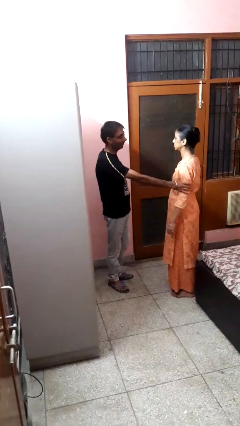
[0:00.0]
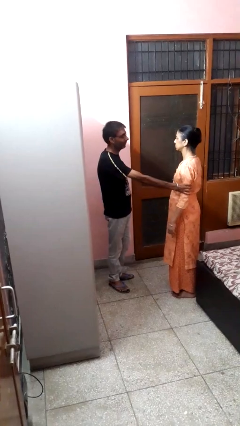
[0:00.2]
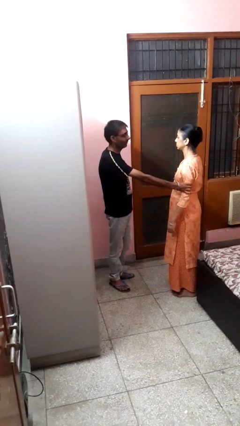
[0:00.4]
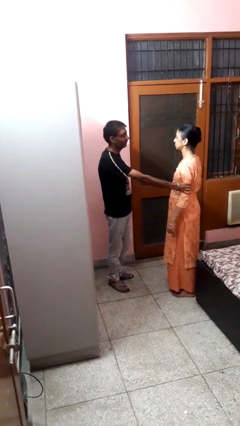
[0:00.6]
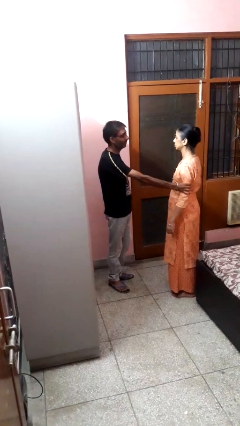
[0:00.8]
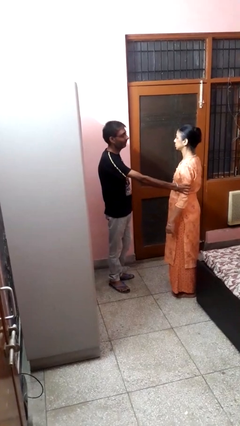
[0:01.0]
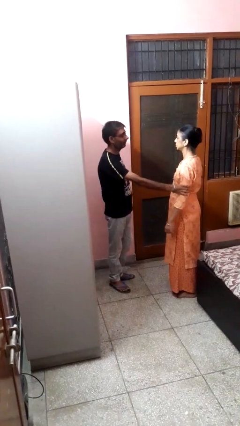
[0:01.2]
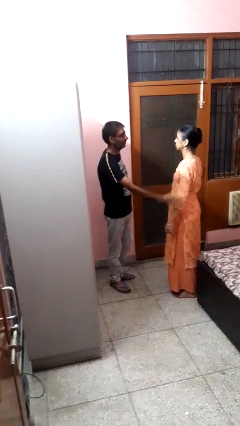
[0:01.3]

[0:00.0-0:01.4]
person grabs person by bicep

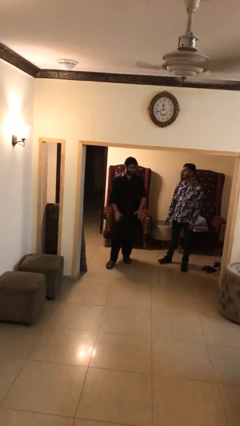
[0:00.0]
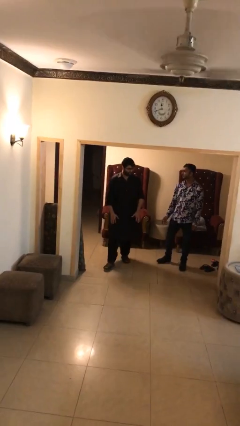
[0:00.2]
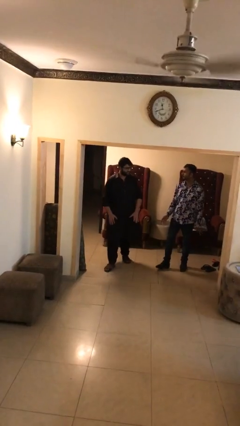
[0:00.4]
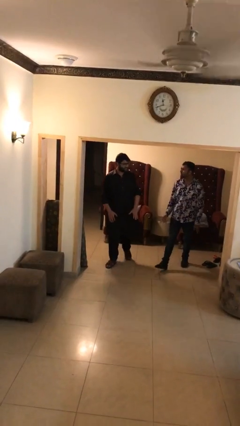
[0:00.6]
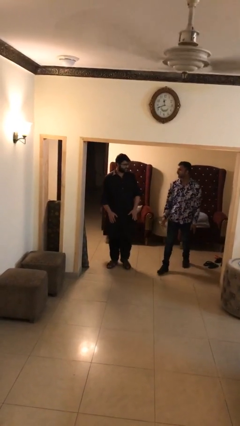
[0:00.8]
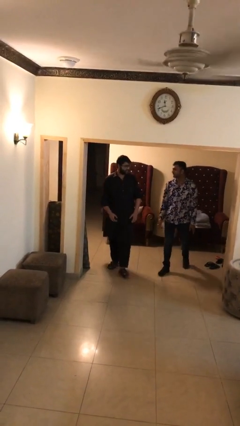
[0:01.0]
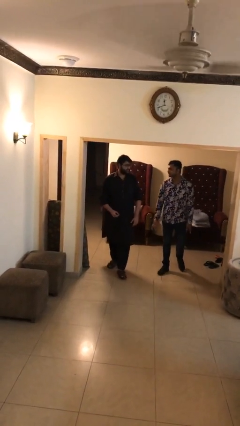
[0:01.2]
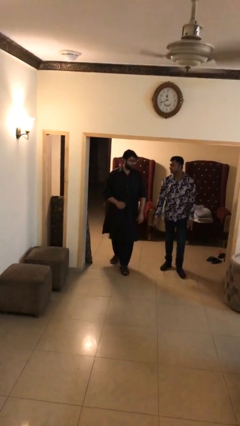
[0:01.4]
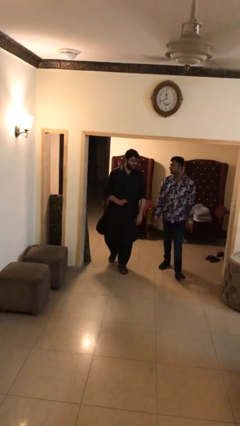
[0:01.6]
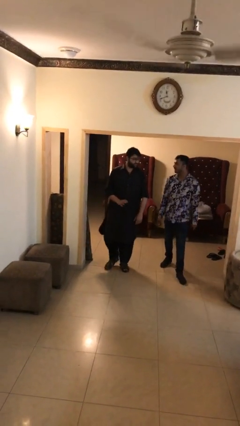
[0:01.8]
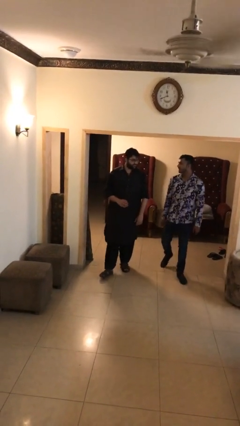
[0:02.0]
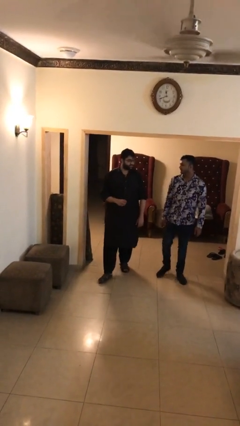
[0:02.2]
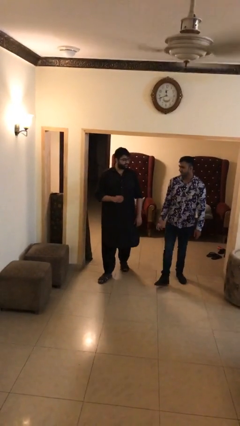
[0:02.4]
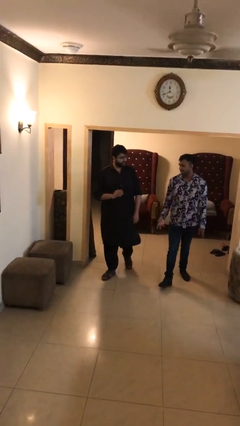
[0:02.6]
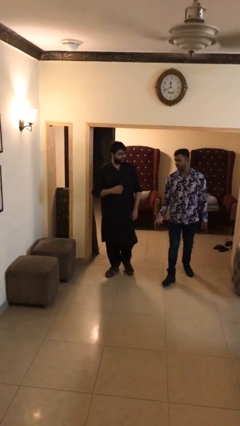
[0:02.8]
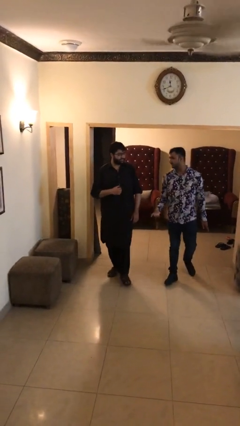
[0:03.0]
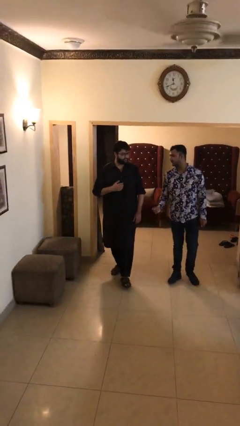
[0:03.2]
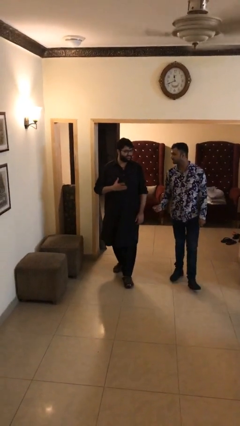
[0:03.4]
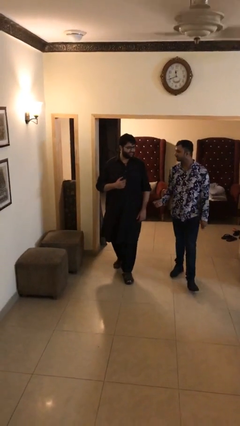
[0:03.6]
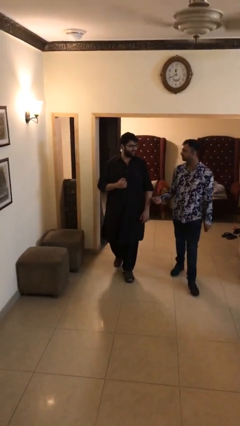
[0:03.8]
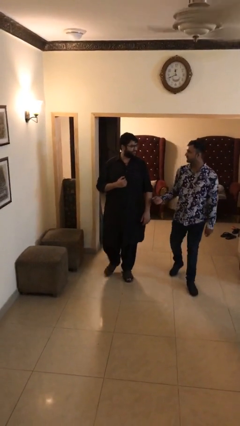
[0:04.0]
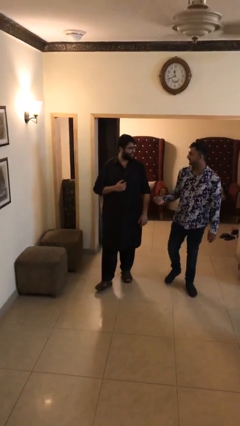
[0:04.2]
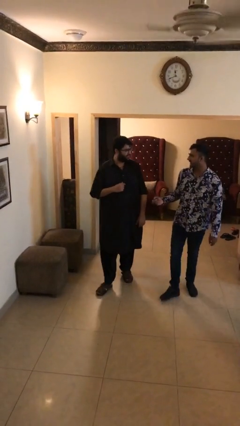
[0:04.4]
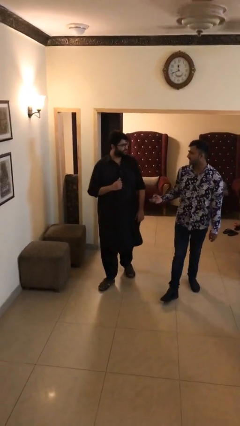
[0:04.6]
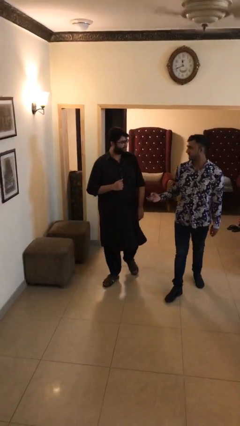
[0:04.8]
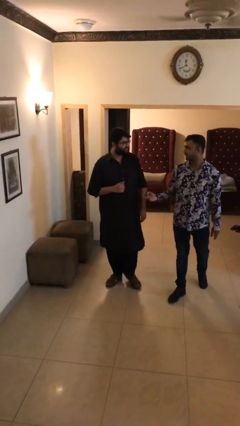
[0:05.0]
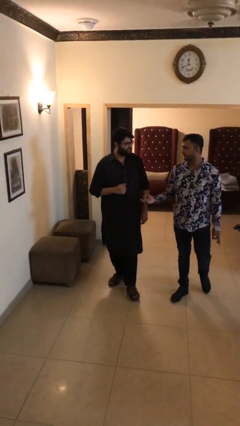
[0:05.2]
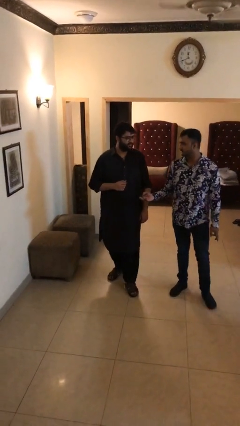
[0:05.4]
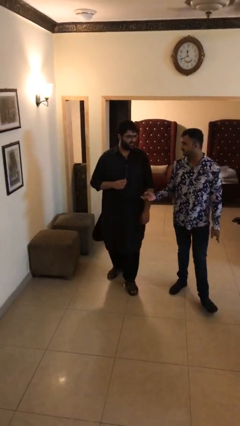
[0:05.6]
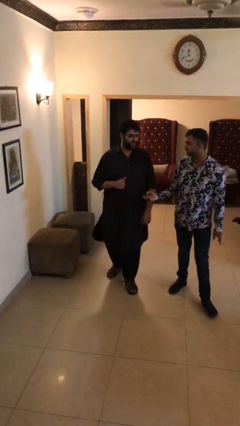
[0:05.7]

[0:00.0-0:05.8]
person talks to person

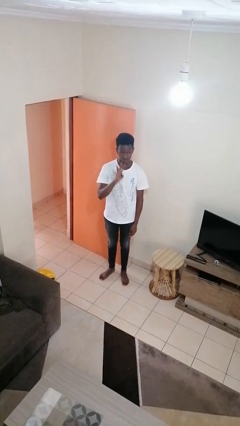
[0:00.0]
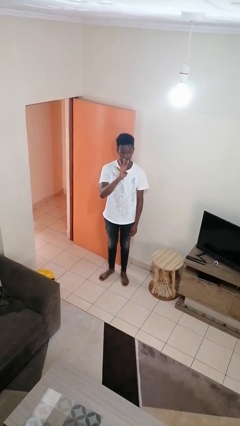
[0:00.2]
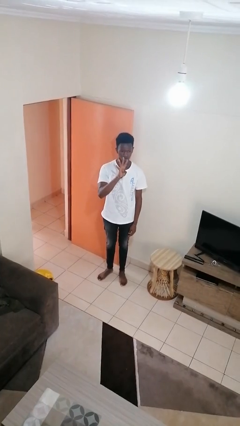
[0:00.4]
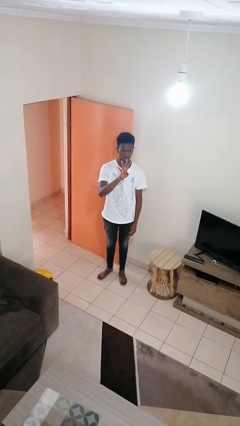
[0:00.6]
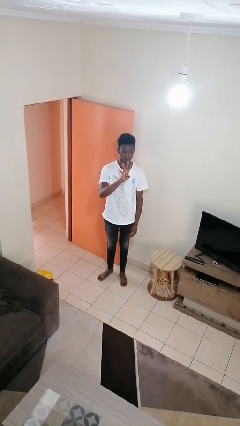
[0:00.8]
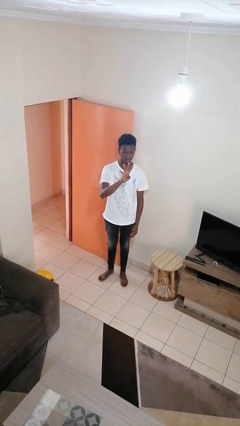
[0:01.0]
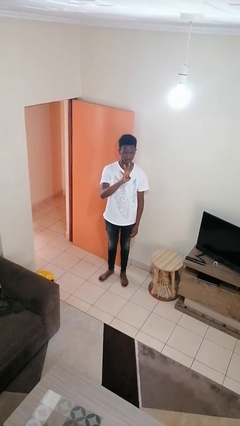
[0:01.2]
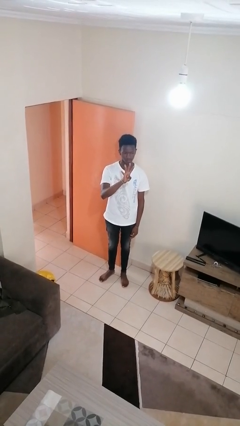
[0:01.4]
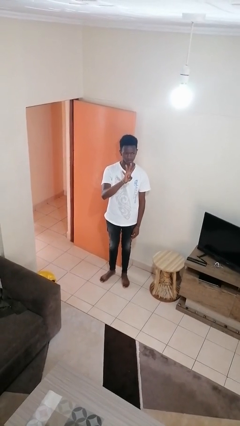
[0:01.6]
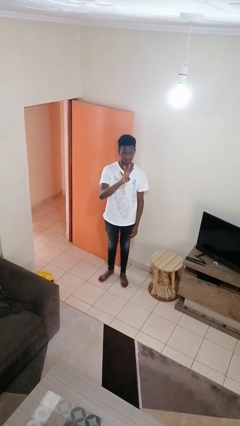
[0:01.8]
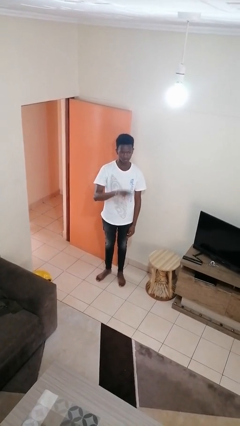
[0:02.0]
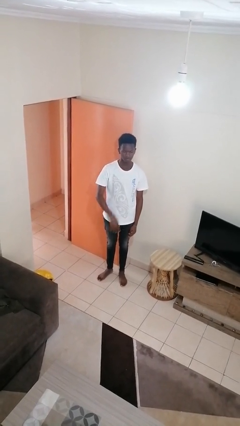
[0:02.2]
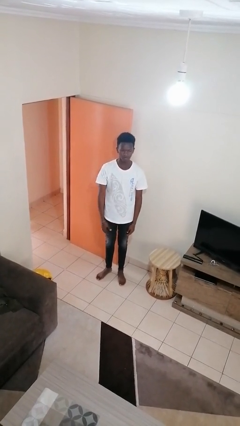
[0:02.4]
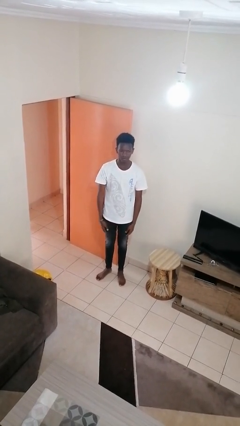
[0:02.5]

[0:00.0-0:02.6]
person gestures number four

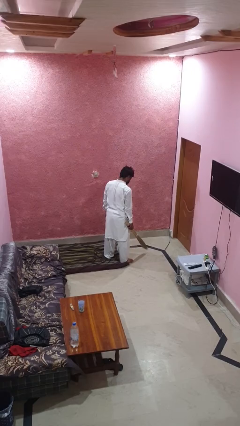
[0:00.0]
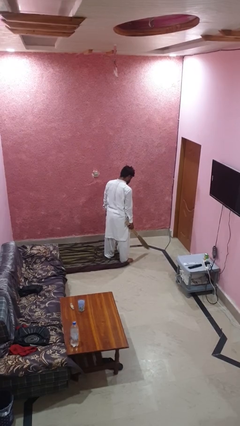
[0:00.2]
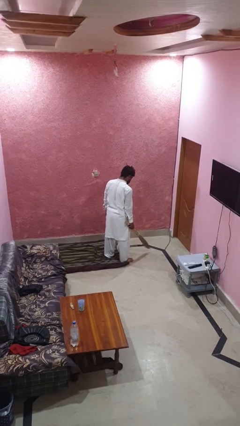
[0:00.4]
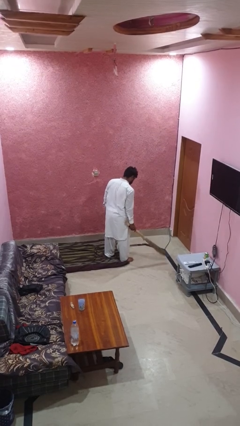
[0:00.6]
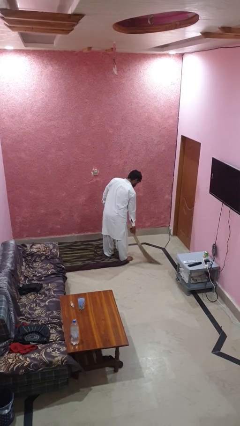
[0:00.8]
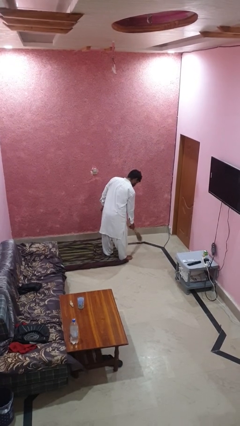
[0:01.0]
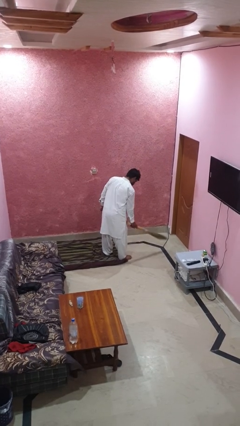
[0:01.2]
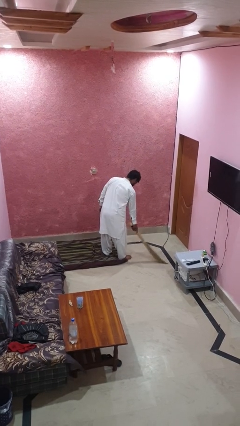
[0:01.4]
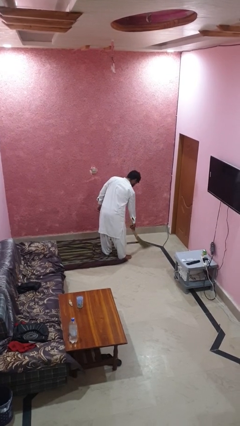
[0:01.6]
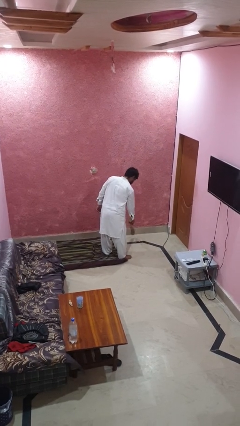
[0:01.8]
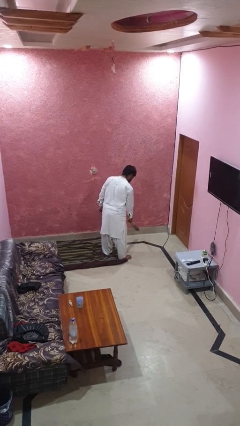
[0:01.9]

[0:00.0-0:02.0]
person sweeps floor

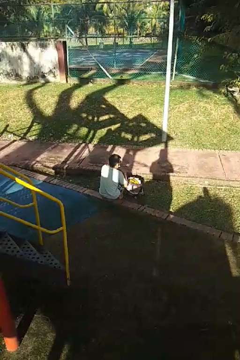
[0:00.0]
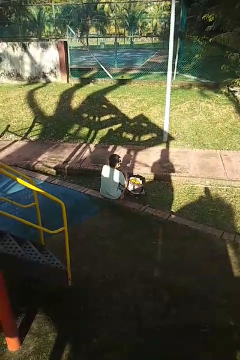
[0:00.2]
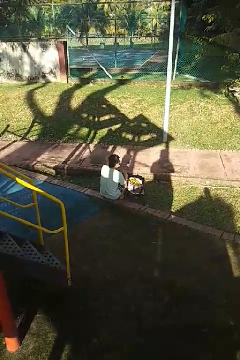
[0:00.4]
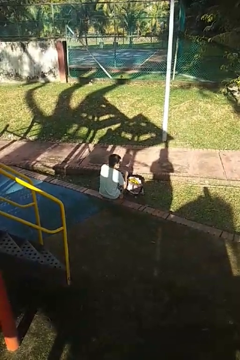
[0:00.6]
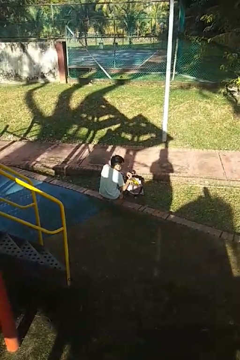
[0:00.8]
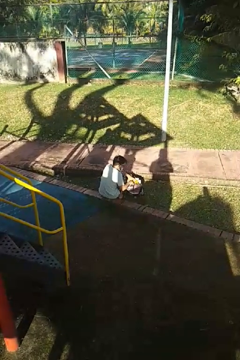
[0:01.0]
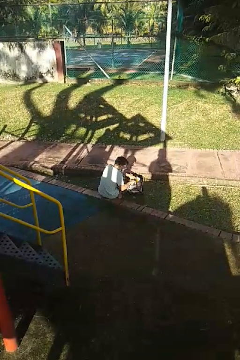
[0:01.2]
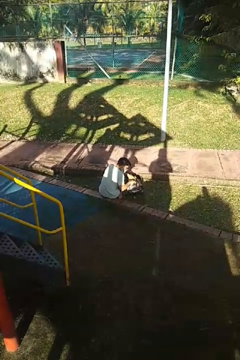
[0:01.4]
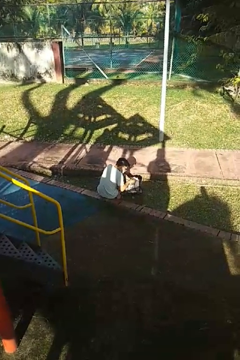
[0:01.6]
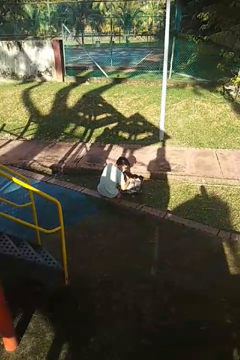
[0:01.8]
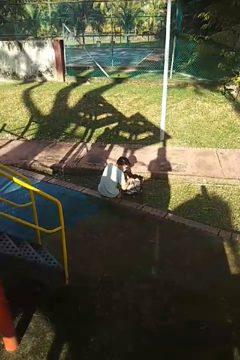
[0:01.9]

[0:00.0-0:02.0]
person searches in bag

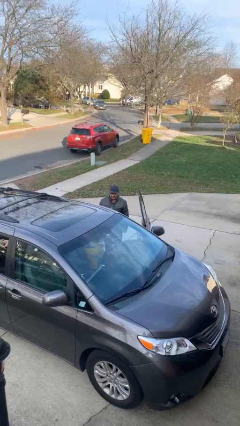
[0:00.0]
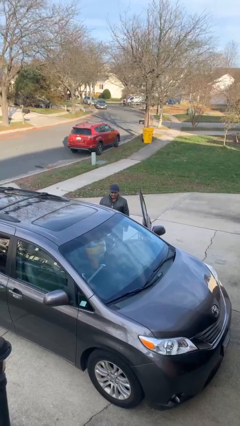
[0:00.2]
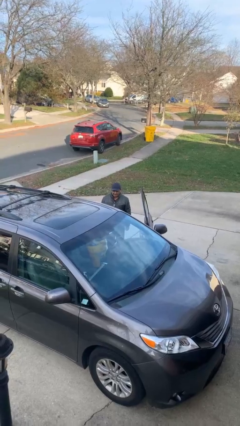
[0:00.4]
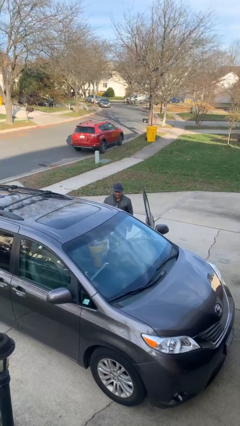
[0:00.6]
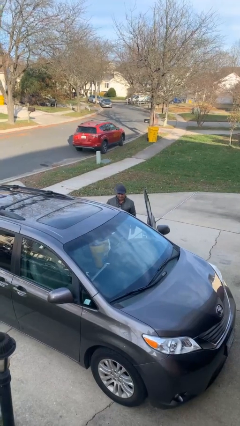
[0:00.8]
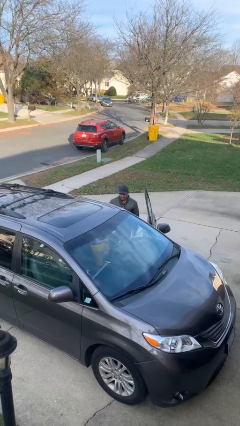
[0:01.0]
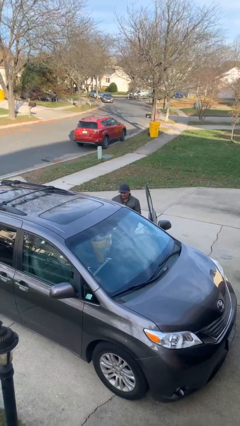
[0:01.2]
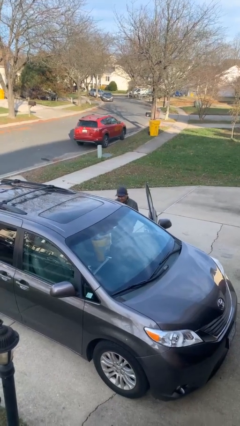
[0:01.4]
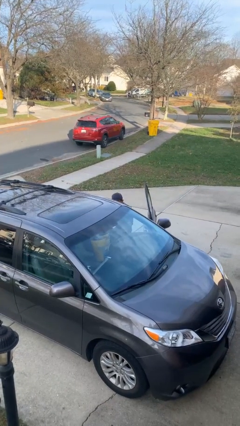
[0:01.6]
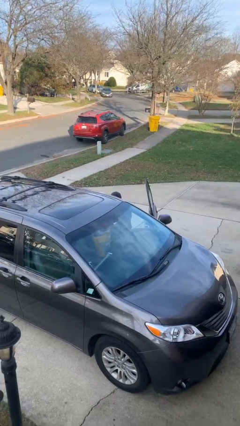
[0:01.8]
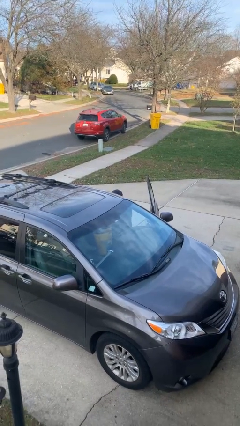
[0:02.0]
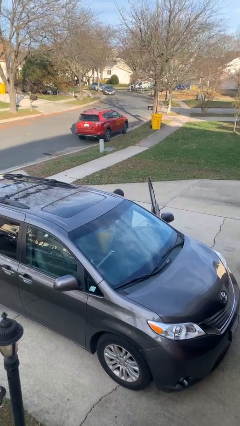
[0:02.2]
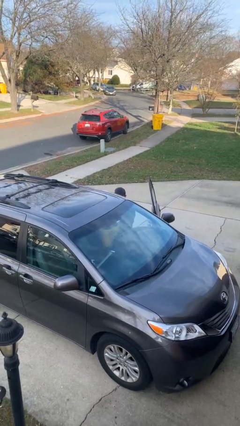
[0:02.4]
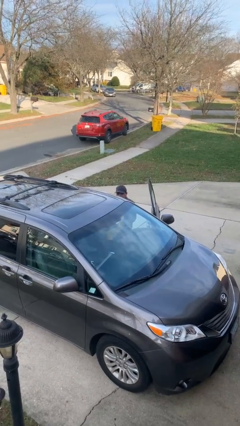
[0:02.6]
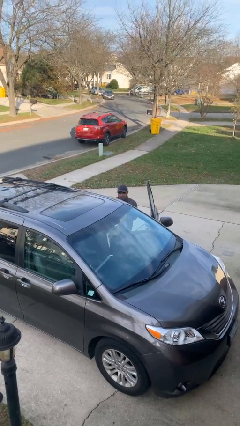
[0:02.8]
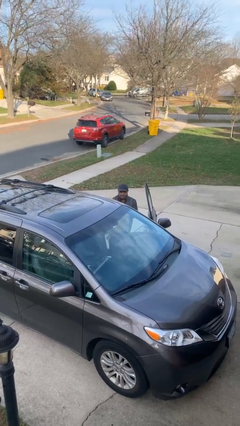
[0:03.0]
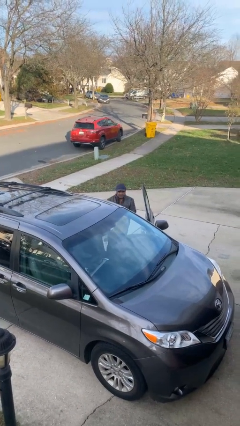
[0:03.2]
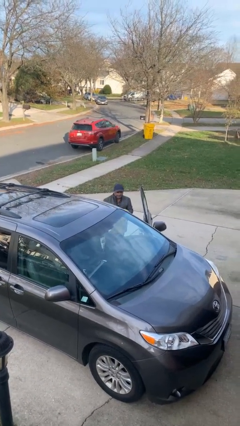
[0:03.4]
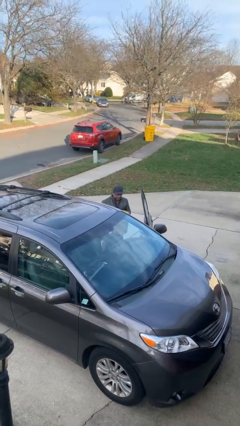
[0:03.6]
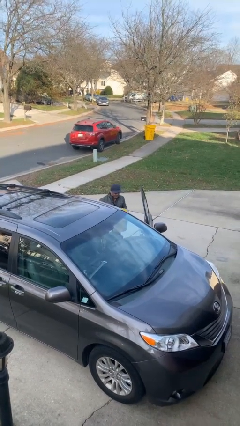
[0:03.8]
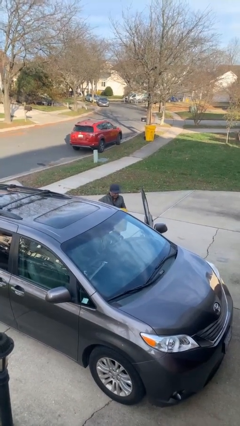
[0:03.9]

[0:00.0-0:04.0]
person unloads car
